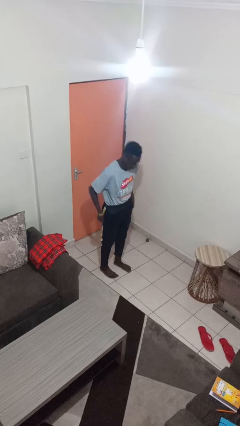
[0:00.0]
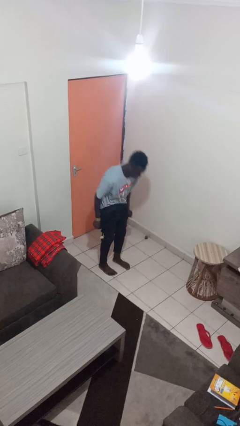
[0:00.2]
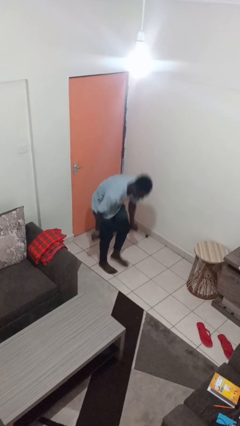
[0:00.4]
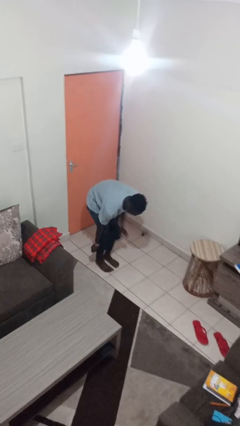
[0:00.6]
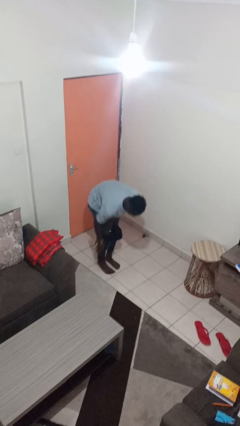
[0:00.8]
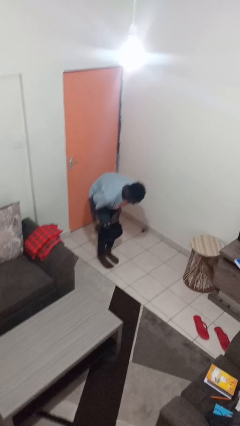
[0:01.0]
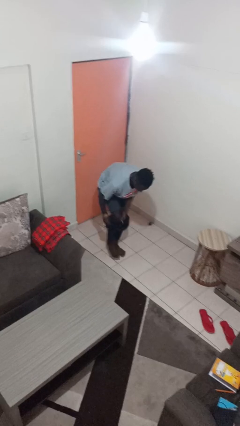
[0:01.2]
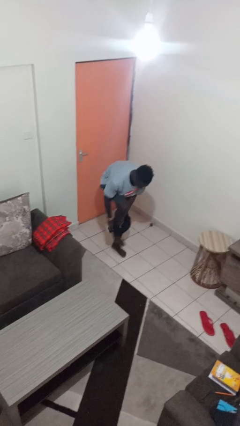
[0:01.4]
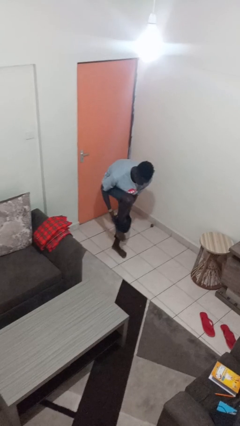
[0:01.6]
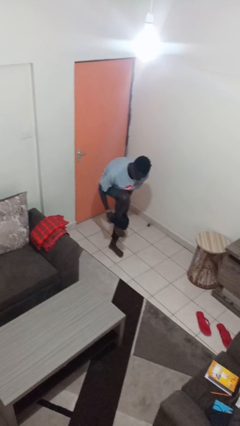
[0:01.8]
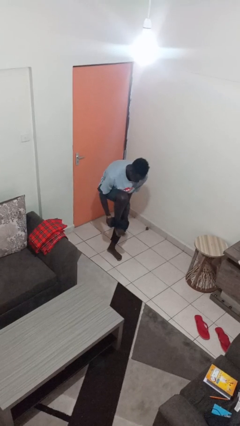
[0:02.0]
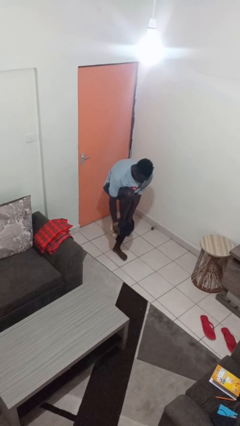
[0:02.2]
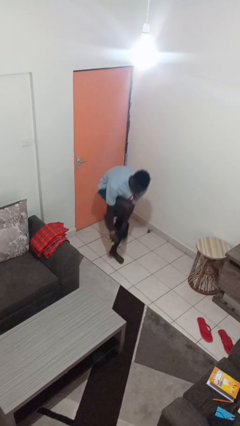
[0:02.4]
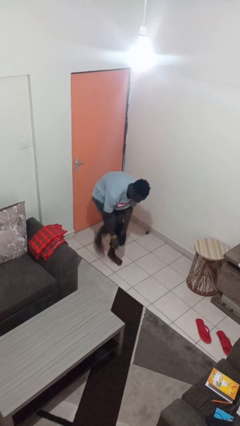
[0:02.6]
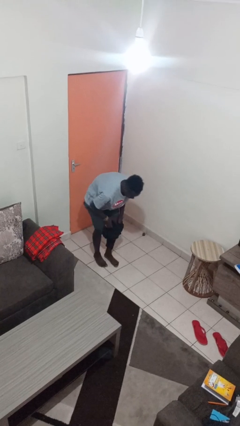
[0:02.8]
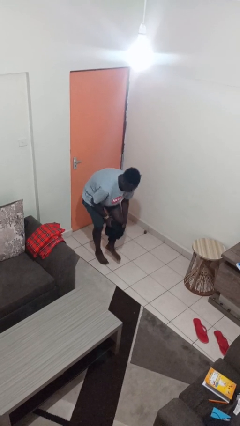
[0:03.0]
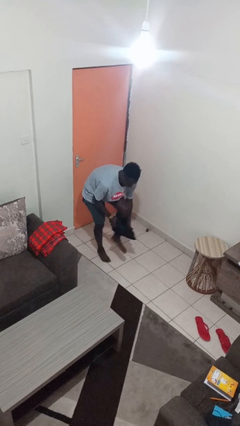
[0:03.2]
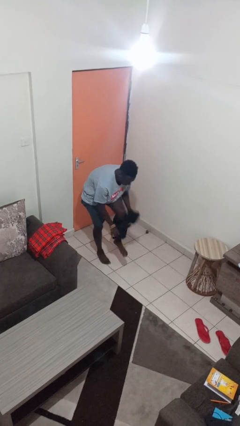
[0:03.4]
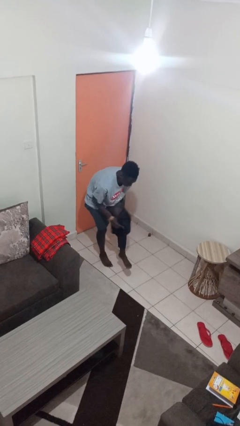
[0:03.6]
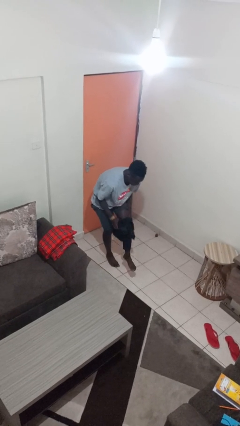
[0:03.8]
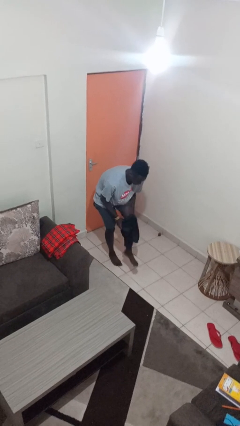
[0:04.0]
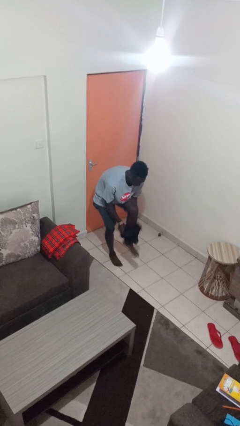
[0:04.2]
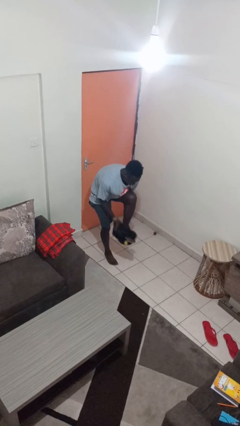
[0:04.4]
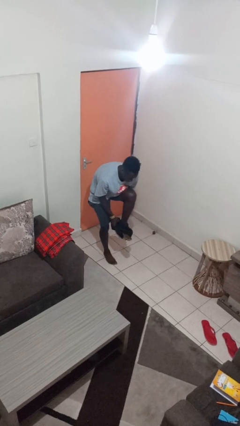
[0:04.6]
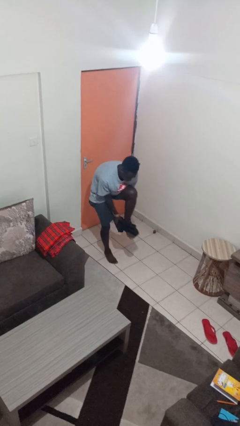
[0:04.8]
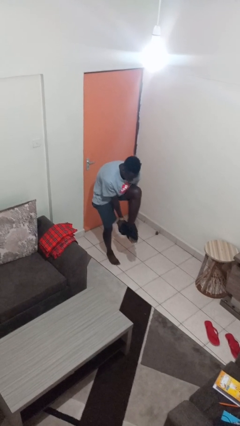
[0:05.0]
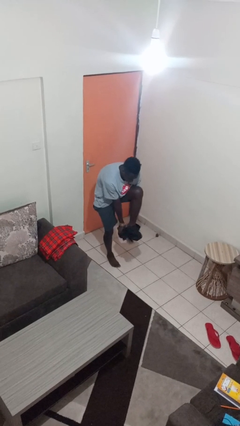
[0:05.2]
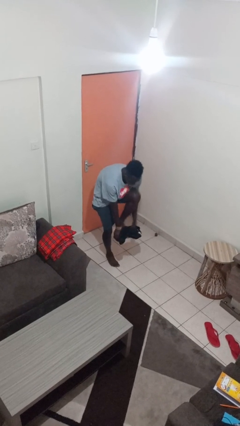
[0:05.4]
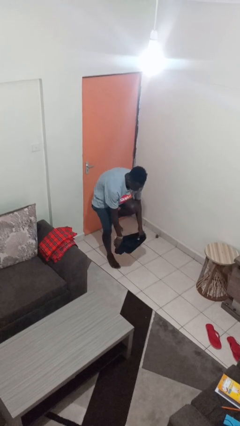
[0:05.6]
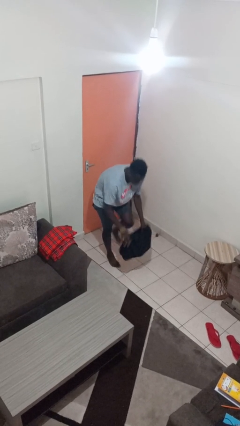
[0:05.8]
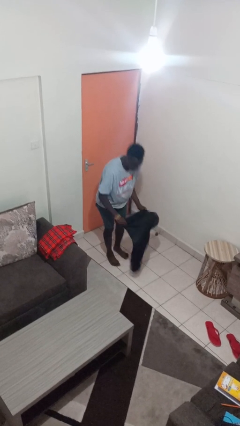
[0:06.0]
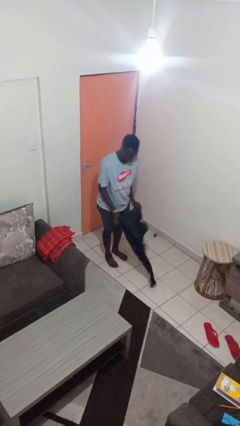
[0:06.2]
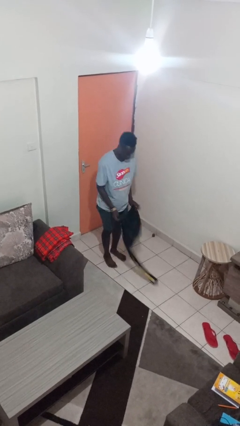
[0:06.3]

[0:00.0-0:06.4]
person takes off pants

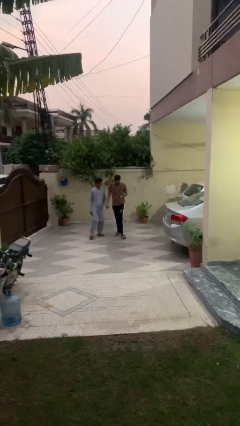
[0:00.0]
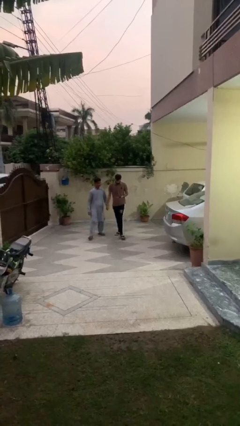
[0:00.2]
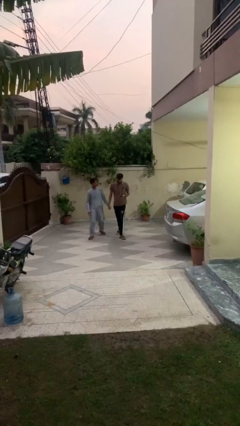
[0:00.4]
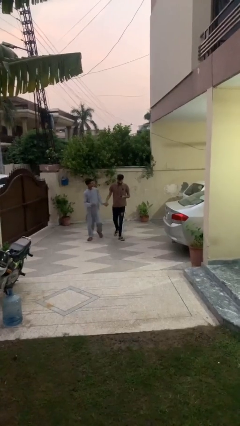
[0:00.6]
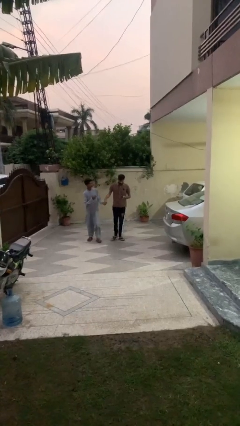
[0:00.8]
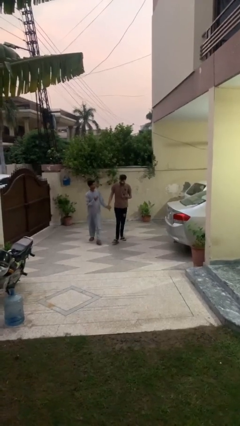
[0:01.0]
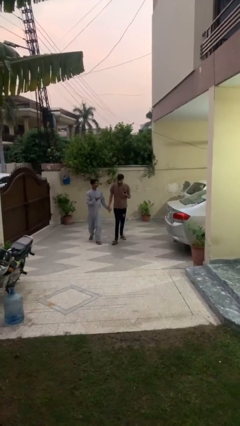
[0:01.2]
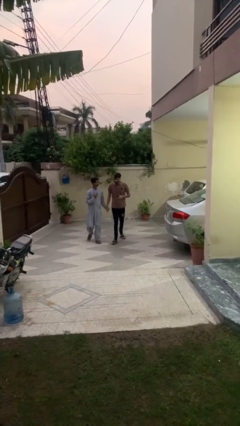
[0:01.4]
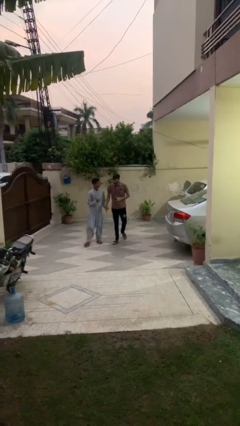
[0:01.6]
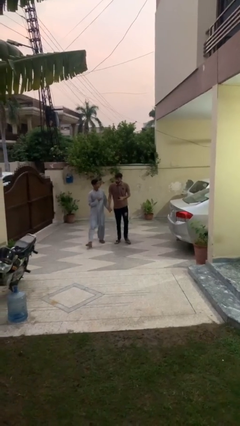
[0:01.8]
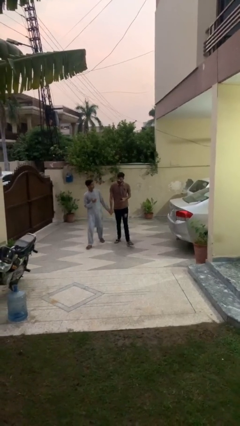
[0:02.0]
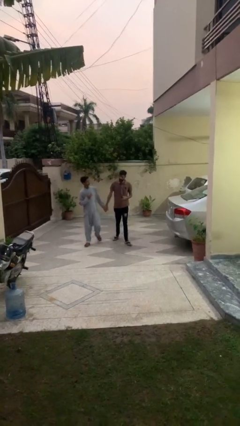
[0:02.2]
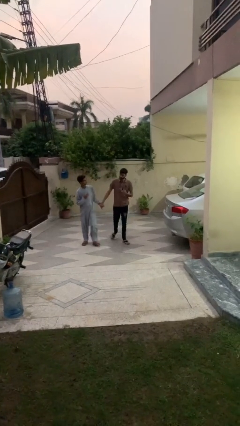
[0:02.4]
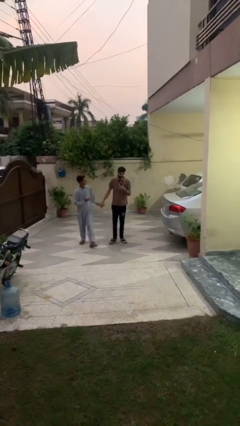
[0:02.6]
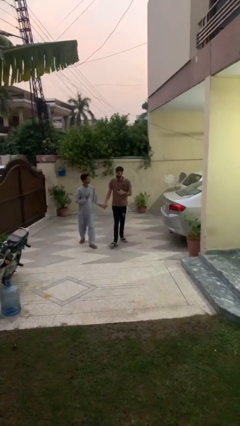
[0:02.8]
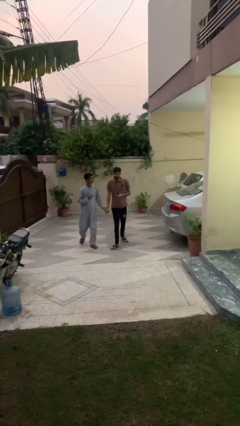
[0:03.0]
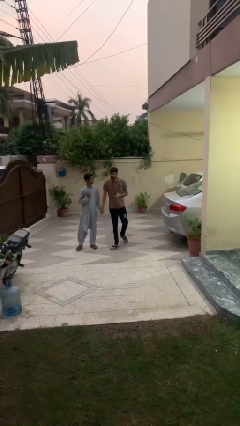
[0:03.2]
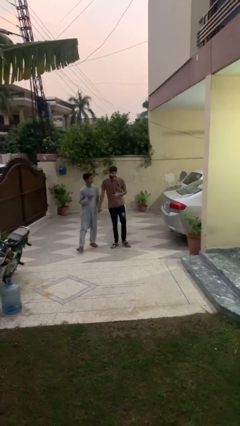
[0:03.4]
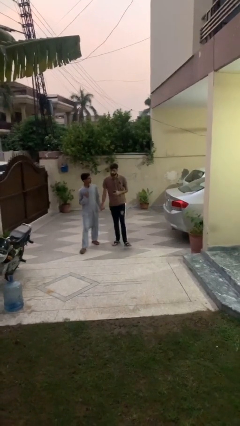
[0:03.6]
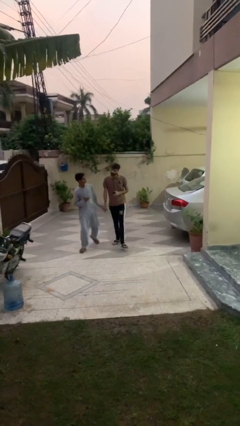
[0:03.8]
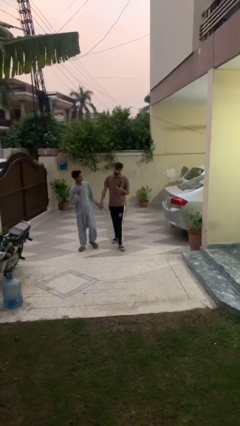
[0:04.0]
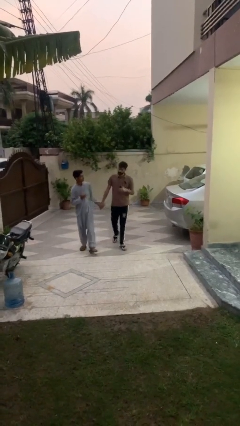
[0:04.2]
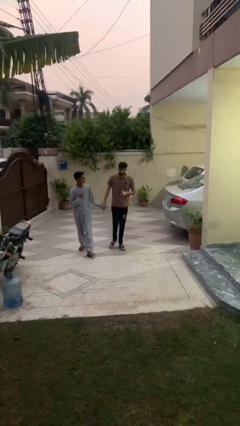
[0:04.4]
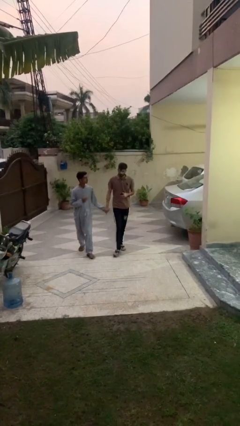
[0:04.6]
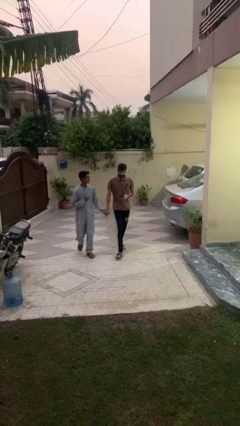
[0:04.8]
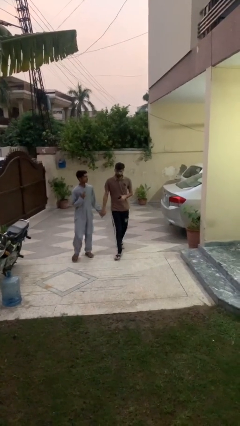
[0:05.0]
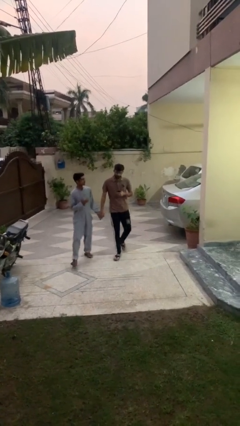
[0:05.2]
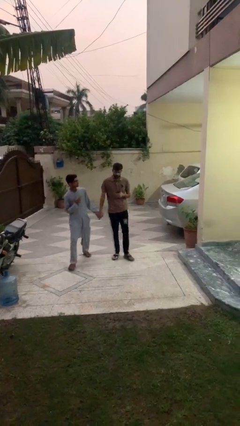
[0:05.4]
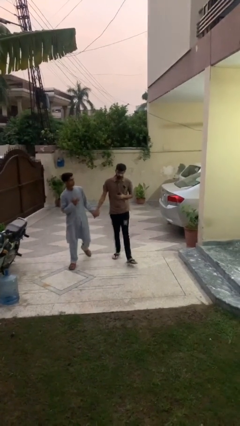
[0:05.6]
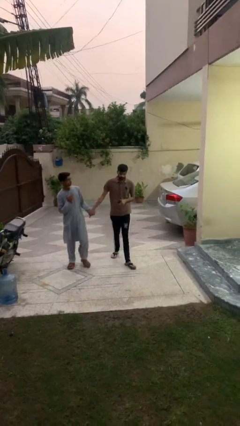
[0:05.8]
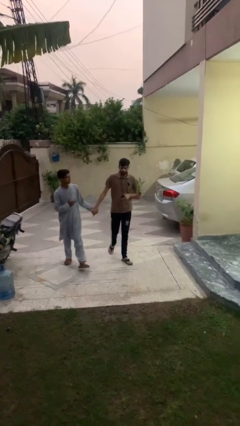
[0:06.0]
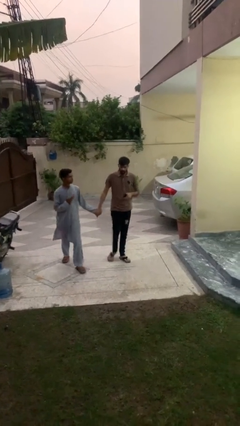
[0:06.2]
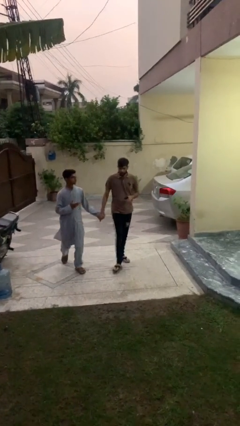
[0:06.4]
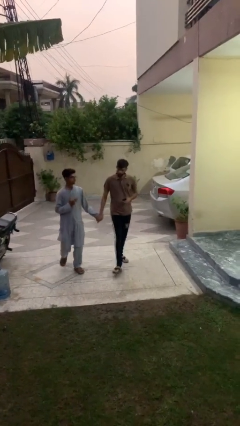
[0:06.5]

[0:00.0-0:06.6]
person holds hand

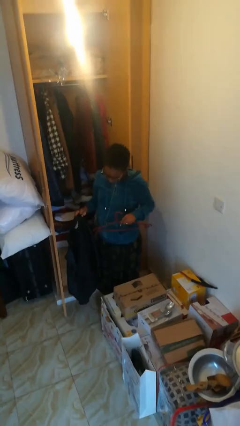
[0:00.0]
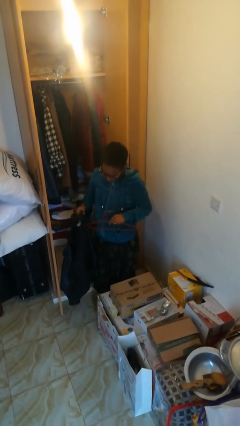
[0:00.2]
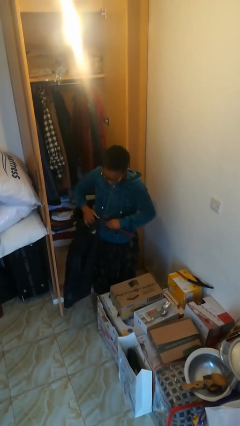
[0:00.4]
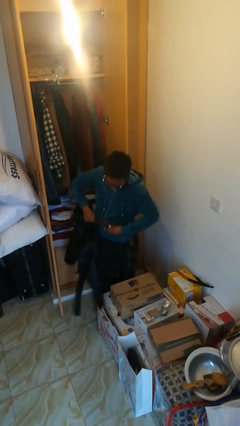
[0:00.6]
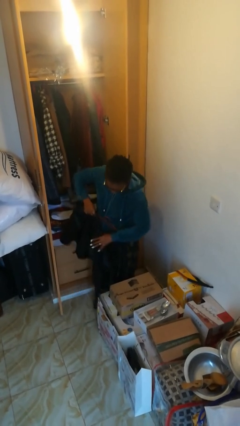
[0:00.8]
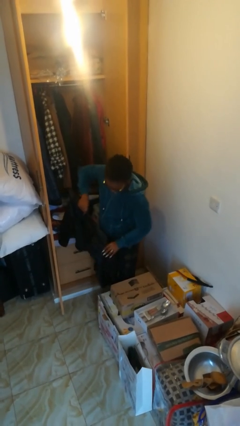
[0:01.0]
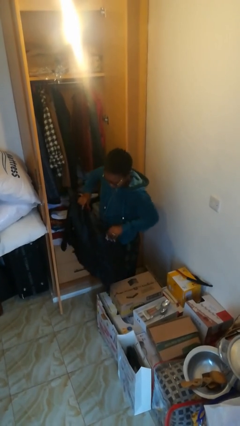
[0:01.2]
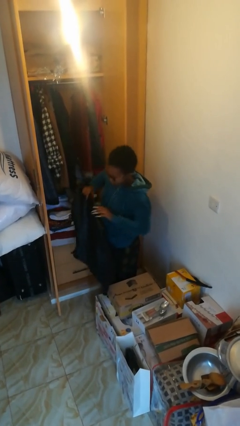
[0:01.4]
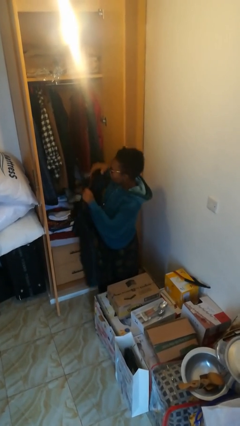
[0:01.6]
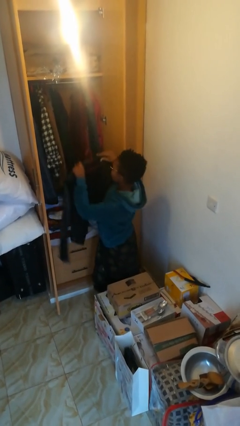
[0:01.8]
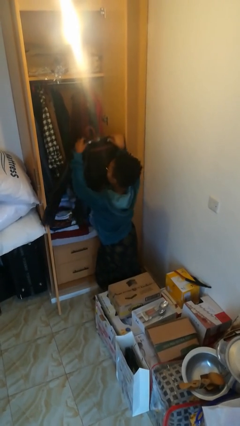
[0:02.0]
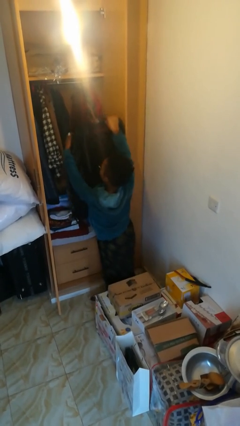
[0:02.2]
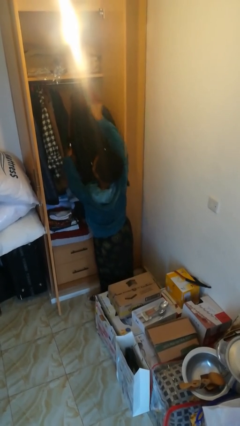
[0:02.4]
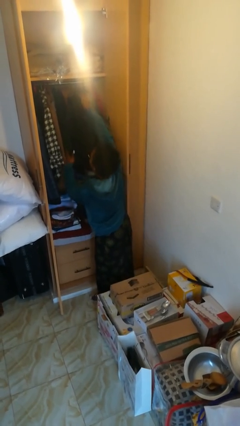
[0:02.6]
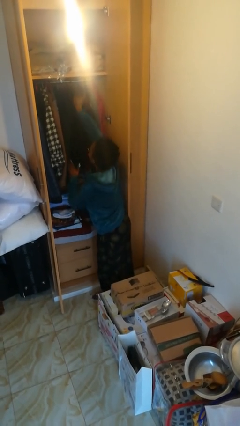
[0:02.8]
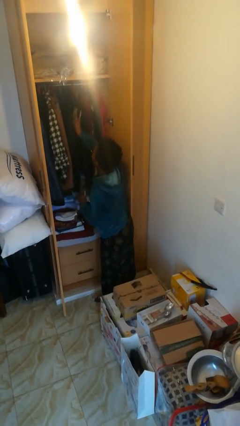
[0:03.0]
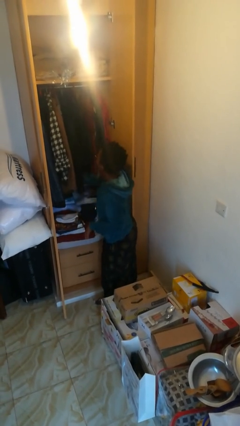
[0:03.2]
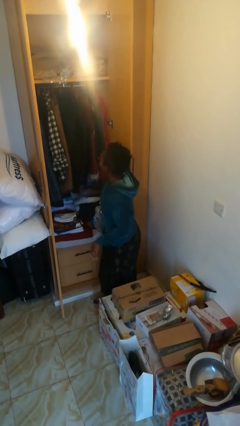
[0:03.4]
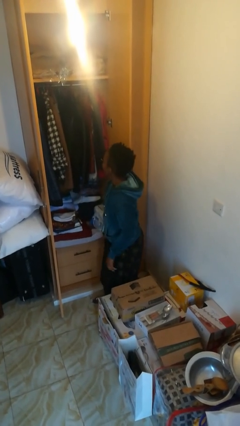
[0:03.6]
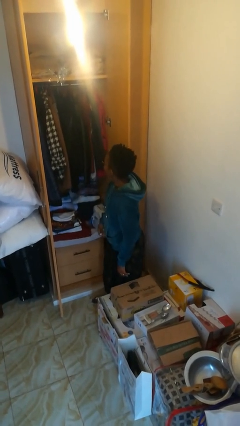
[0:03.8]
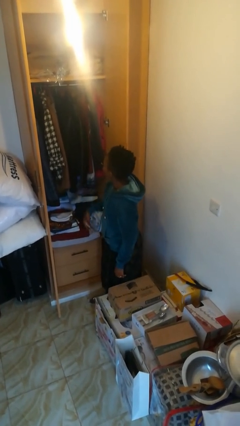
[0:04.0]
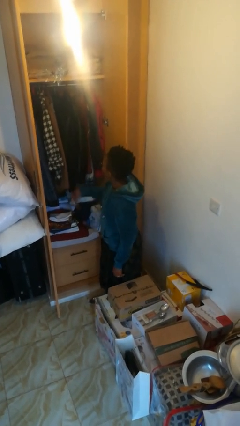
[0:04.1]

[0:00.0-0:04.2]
person puts clothes into closet

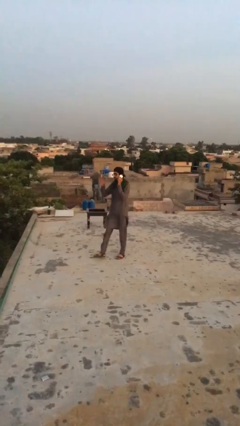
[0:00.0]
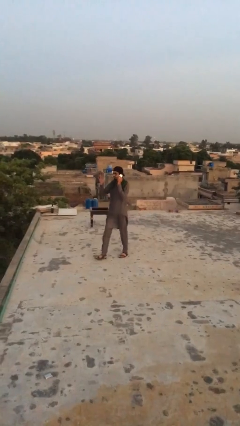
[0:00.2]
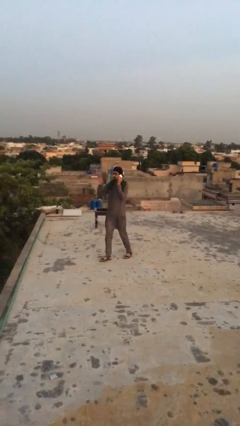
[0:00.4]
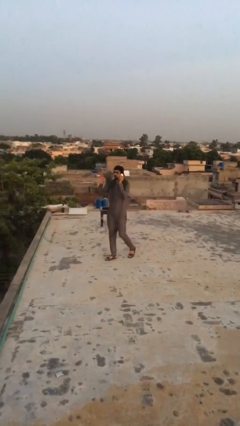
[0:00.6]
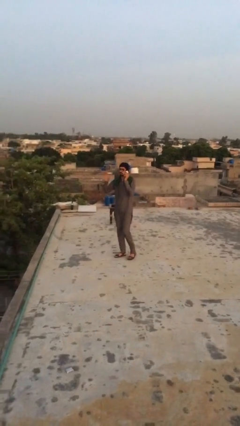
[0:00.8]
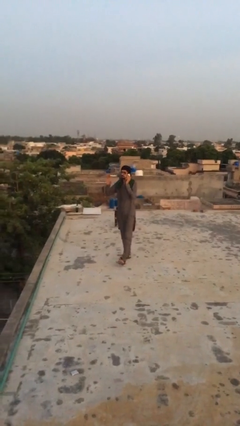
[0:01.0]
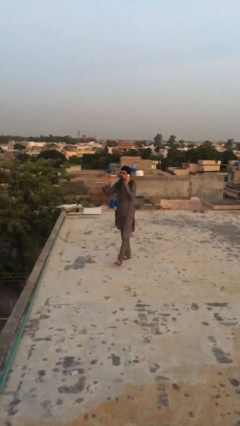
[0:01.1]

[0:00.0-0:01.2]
person talks on phone
